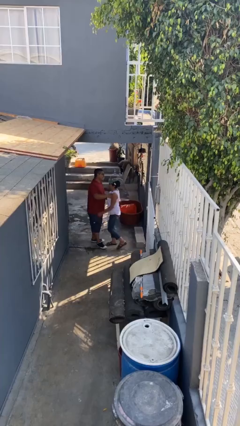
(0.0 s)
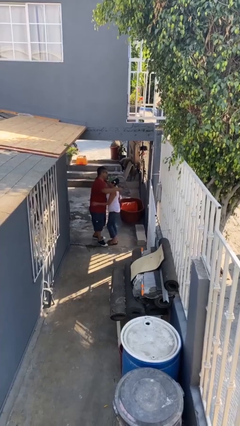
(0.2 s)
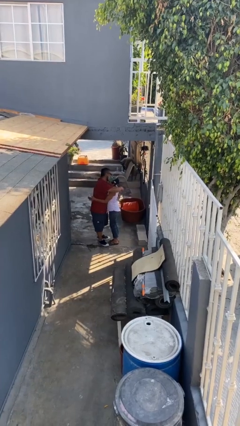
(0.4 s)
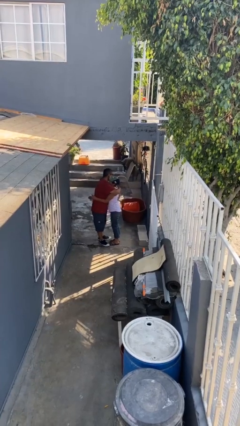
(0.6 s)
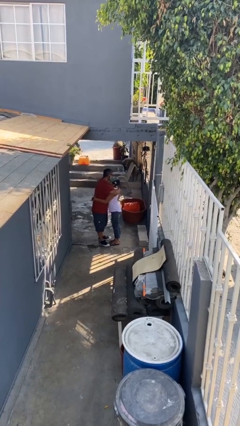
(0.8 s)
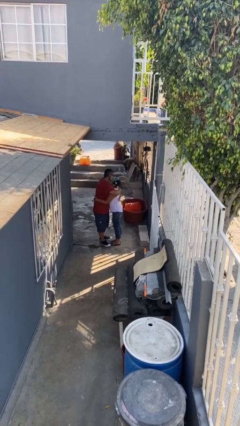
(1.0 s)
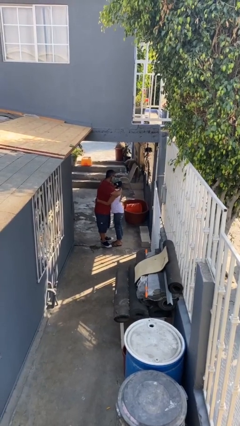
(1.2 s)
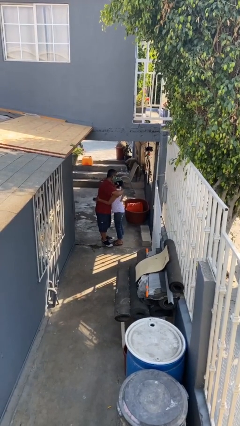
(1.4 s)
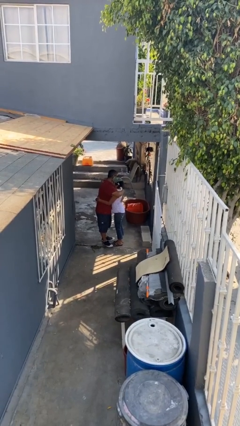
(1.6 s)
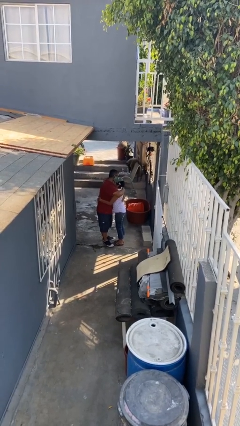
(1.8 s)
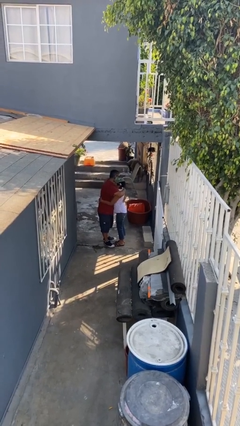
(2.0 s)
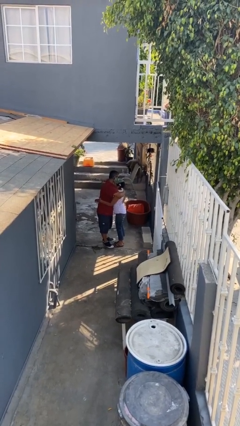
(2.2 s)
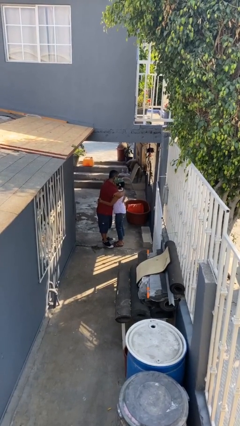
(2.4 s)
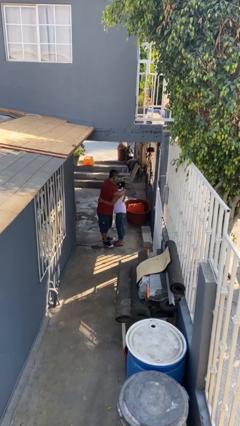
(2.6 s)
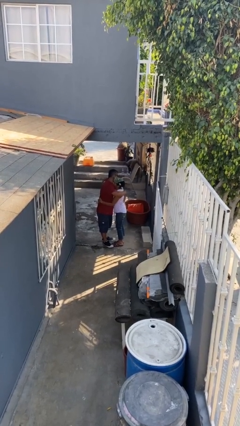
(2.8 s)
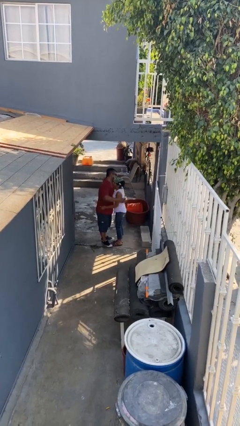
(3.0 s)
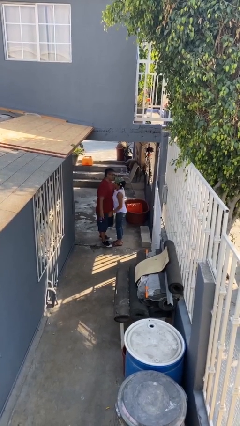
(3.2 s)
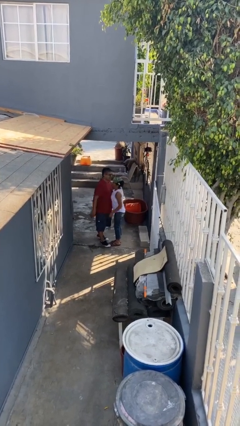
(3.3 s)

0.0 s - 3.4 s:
person embraces person

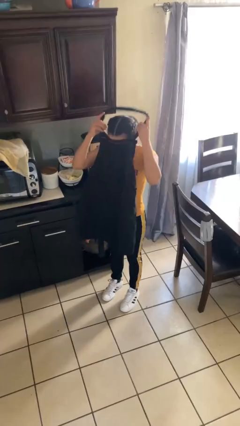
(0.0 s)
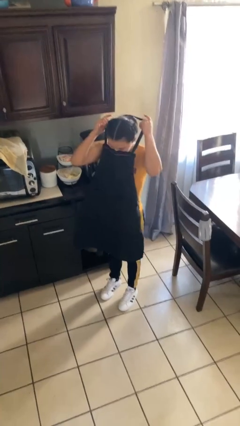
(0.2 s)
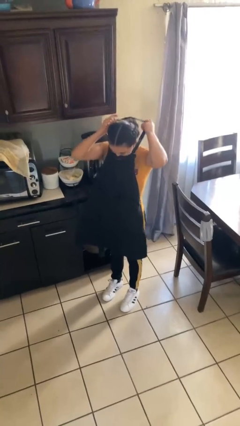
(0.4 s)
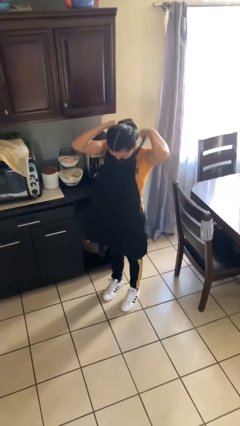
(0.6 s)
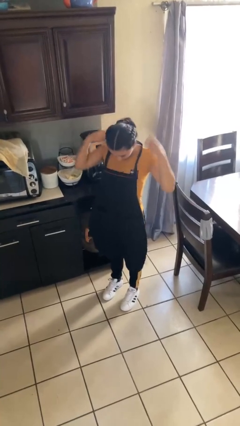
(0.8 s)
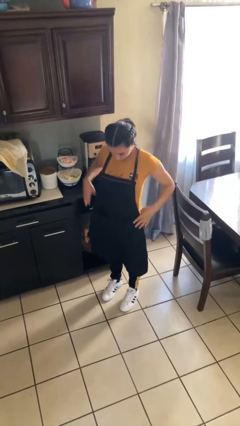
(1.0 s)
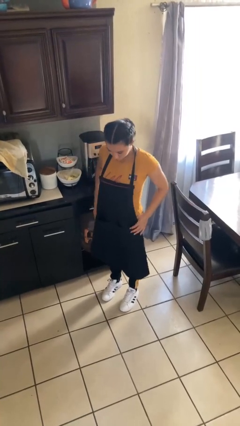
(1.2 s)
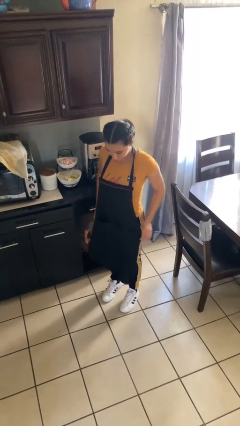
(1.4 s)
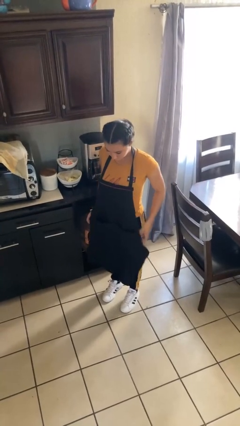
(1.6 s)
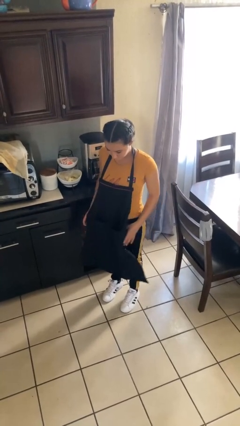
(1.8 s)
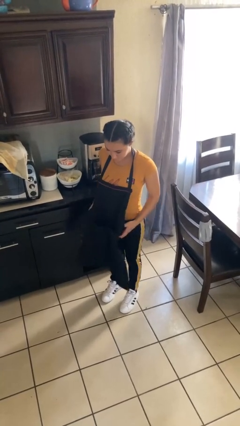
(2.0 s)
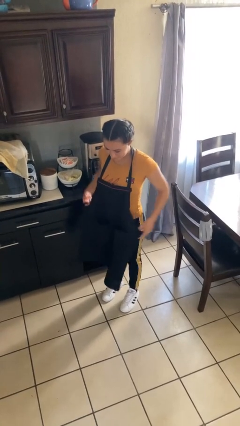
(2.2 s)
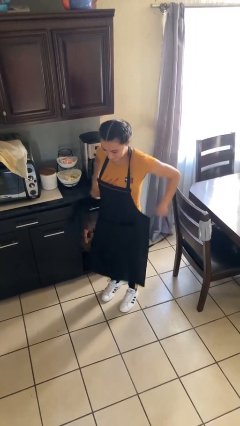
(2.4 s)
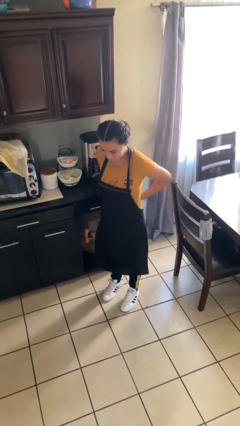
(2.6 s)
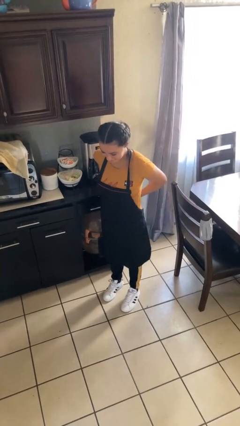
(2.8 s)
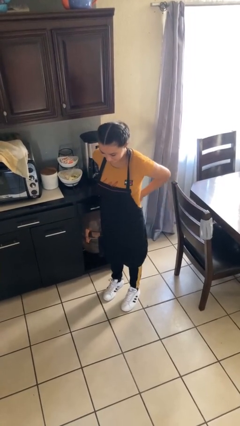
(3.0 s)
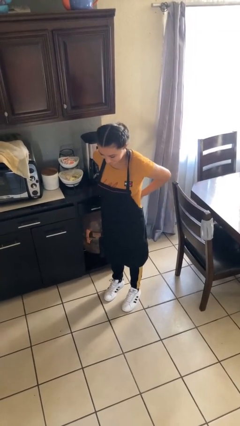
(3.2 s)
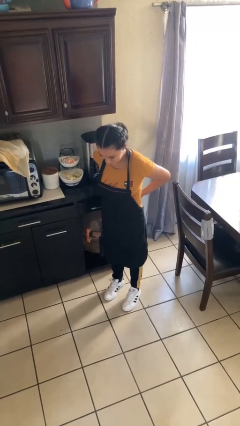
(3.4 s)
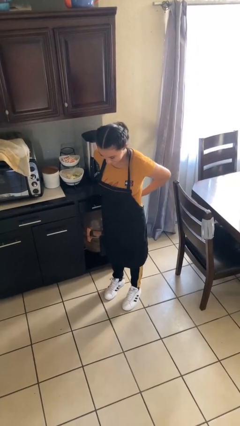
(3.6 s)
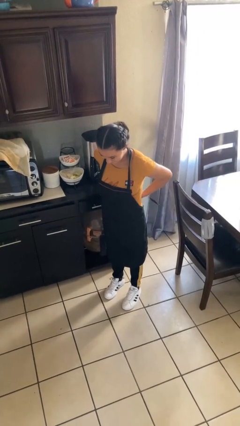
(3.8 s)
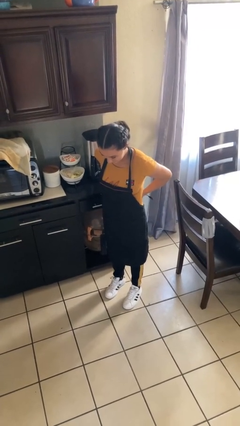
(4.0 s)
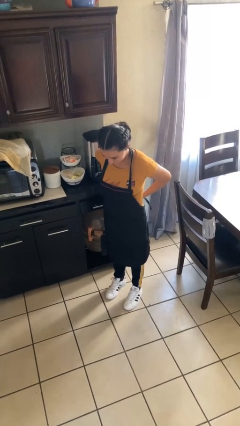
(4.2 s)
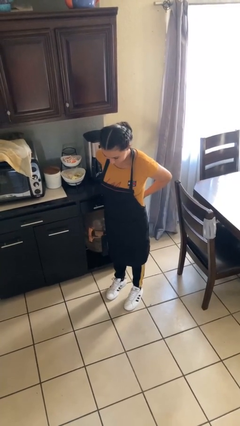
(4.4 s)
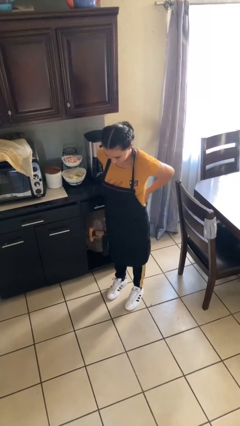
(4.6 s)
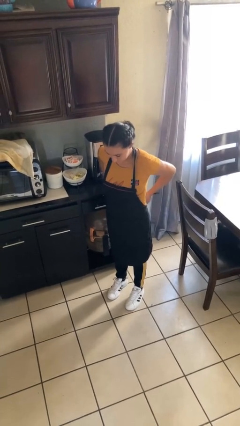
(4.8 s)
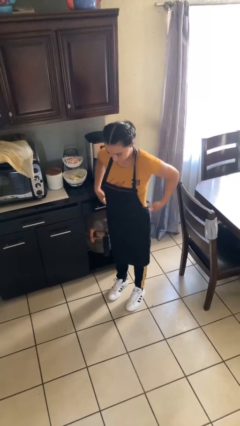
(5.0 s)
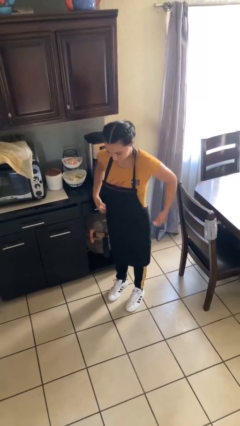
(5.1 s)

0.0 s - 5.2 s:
person puts on apron

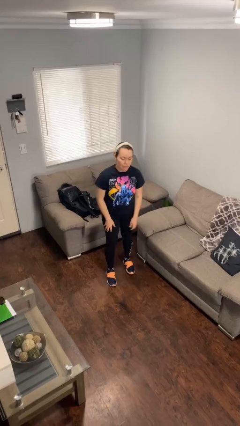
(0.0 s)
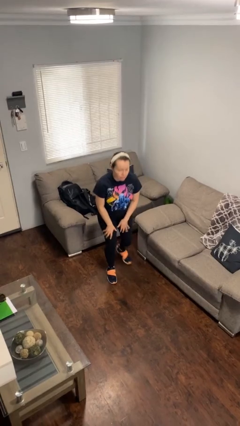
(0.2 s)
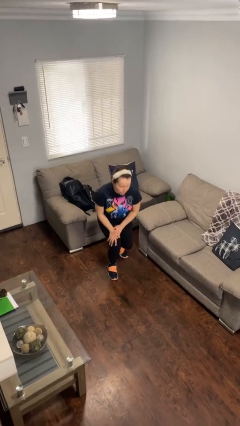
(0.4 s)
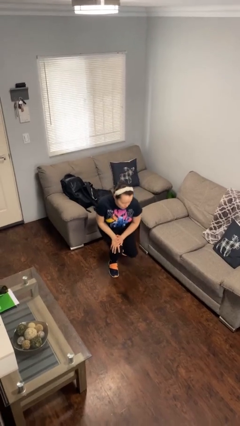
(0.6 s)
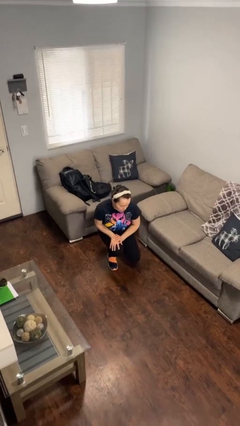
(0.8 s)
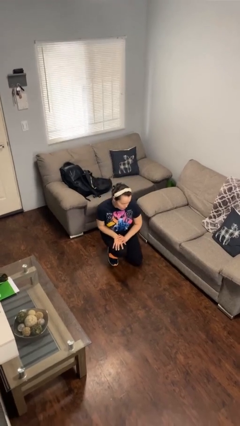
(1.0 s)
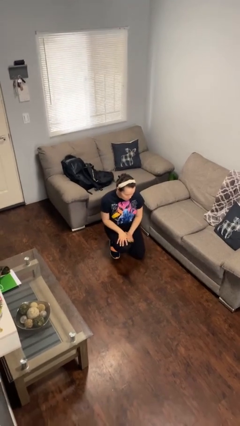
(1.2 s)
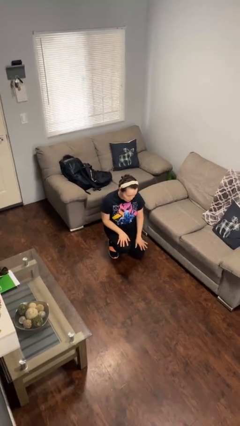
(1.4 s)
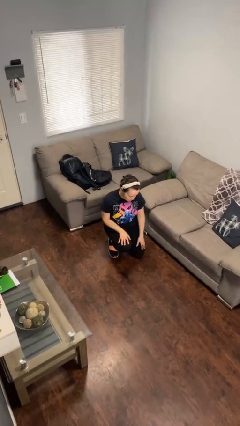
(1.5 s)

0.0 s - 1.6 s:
person kneels

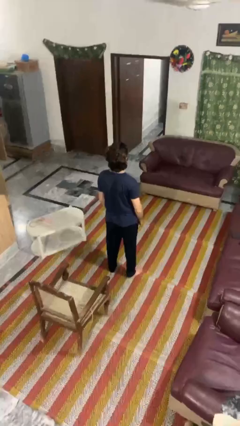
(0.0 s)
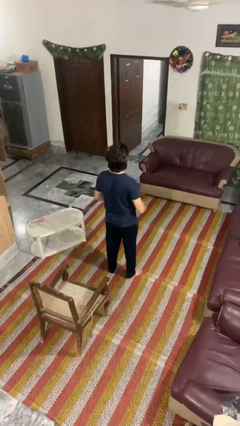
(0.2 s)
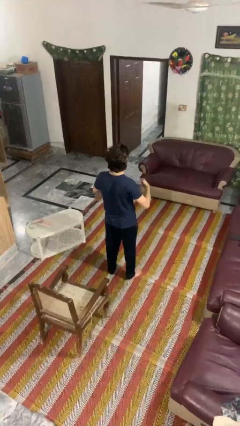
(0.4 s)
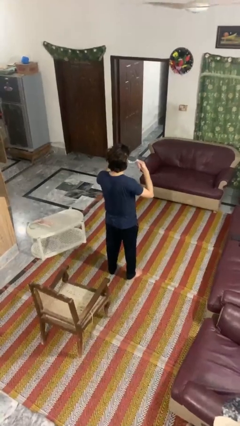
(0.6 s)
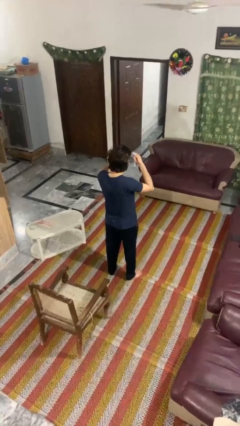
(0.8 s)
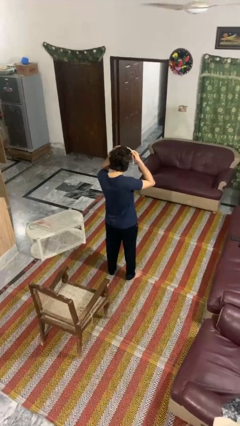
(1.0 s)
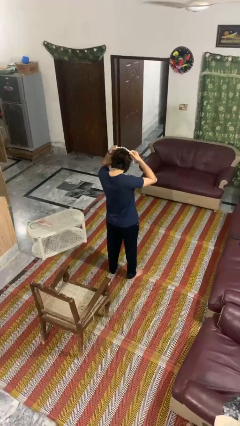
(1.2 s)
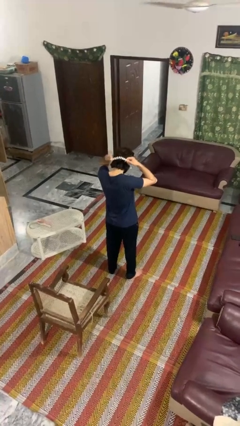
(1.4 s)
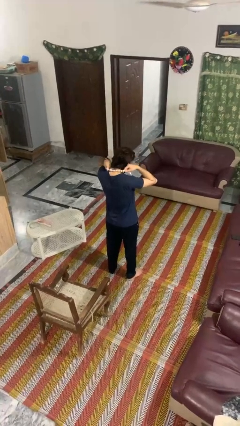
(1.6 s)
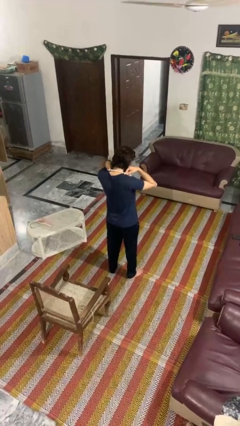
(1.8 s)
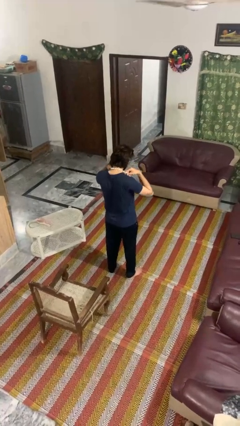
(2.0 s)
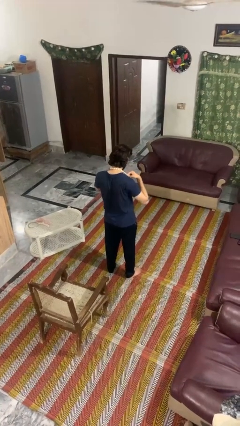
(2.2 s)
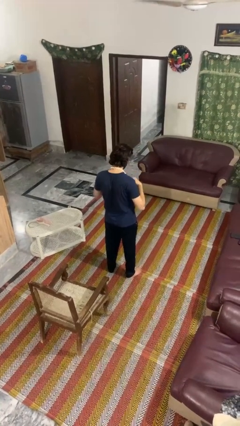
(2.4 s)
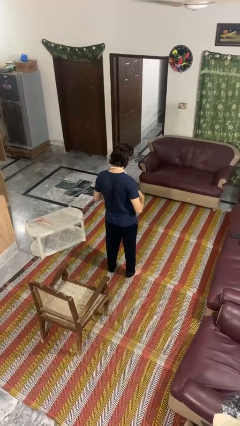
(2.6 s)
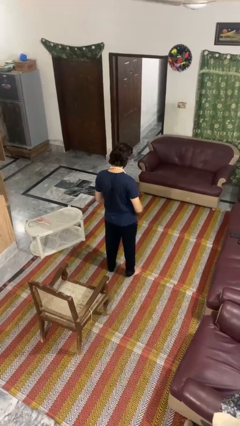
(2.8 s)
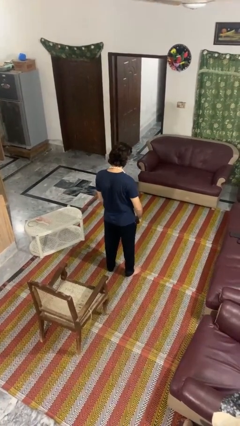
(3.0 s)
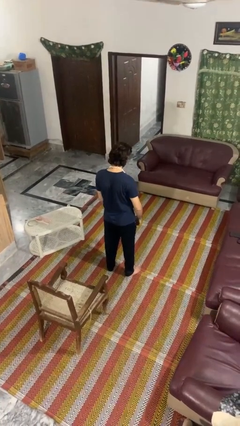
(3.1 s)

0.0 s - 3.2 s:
person puts on necklace

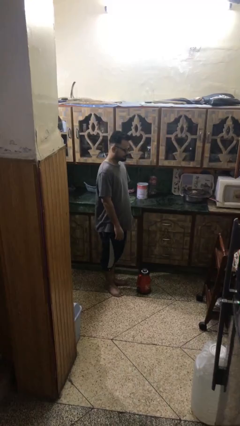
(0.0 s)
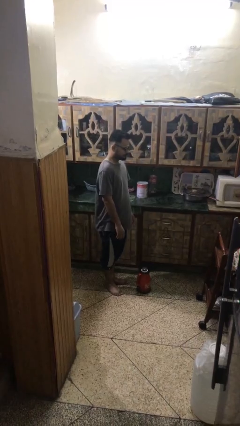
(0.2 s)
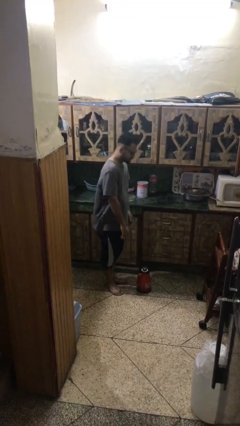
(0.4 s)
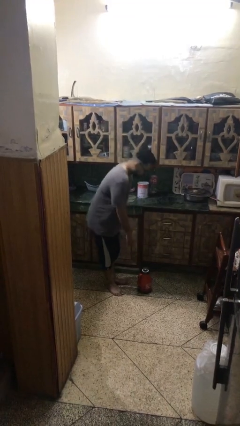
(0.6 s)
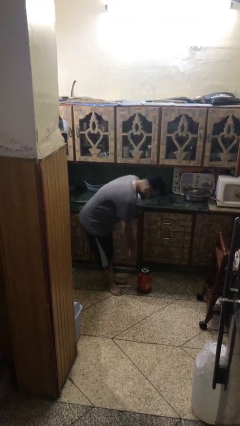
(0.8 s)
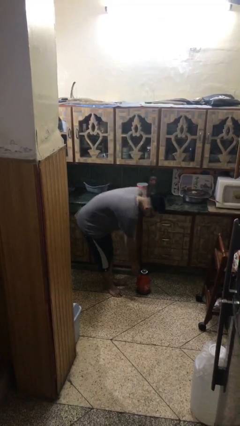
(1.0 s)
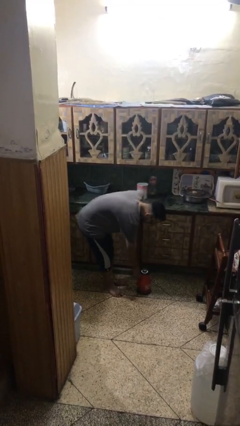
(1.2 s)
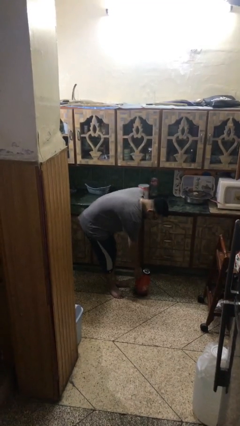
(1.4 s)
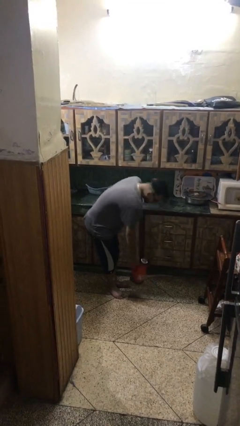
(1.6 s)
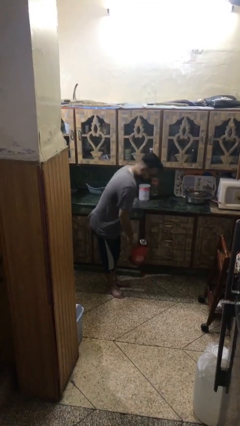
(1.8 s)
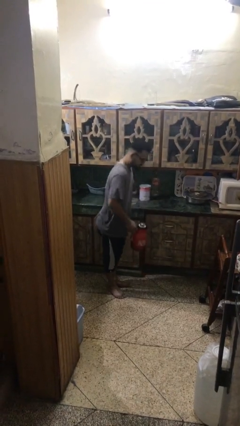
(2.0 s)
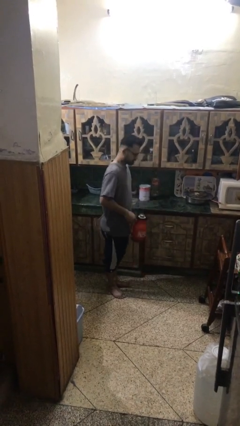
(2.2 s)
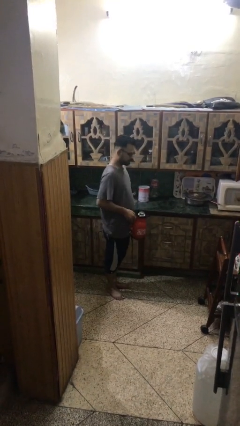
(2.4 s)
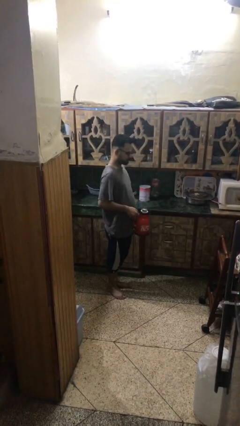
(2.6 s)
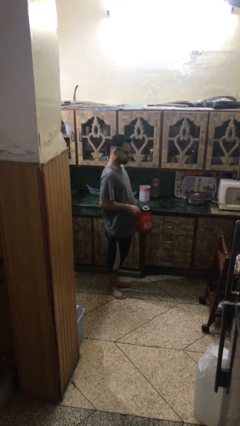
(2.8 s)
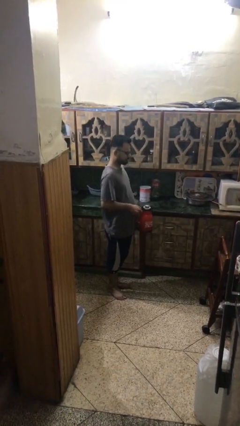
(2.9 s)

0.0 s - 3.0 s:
person picks up object from floor

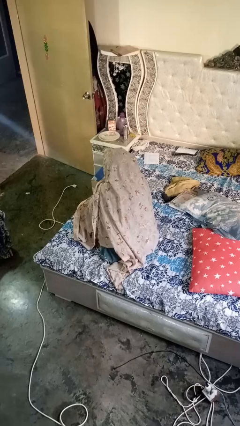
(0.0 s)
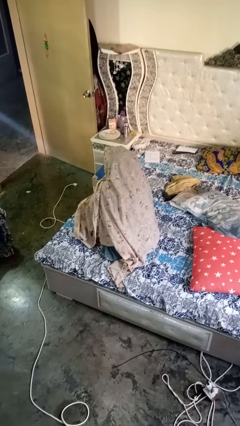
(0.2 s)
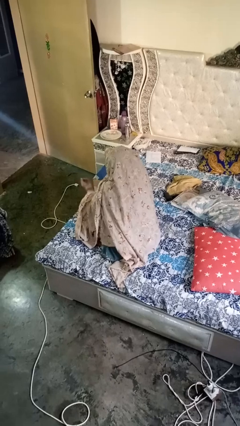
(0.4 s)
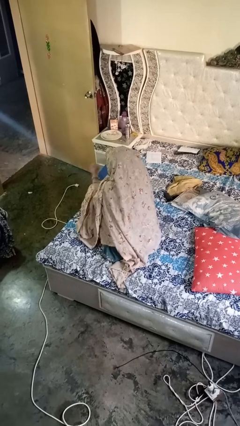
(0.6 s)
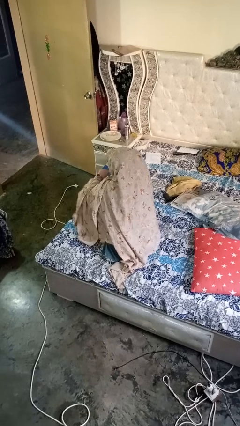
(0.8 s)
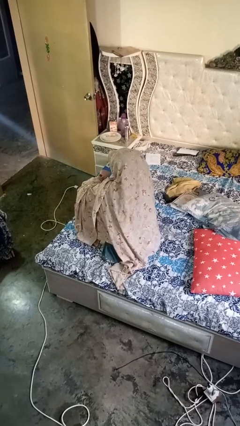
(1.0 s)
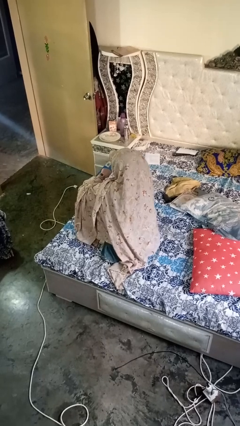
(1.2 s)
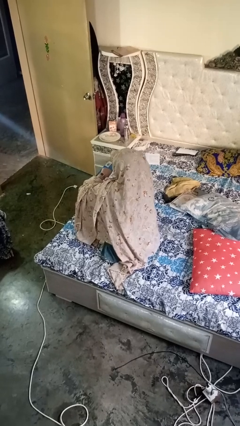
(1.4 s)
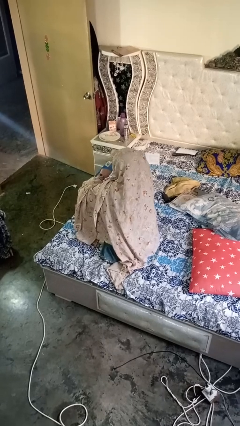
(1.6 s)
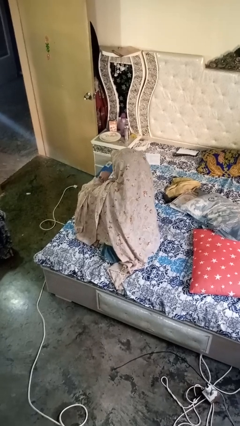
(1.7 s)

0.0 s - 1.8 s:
person looks at wristwatch
